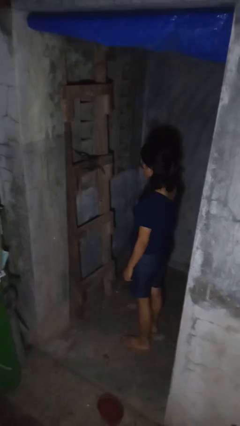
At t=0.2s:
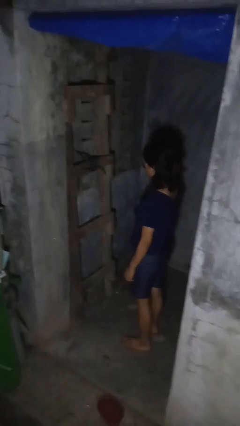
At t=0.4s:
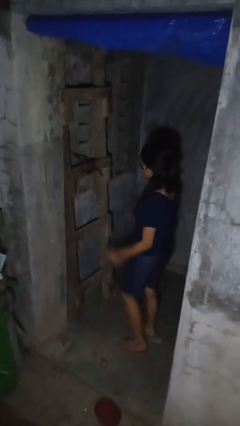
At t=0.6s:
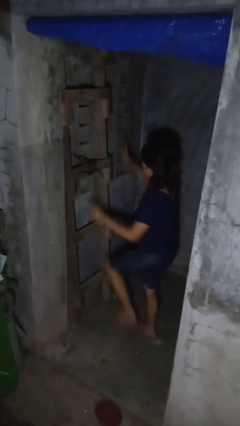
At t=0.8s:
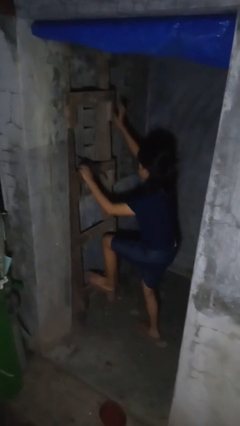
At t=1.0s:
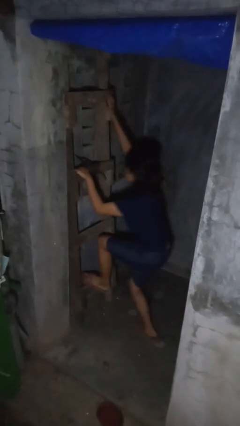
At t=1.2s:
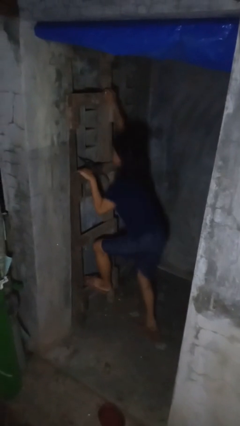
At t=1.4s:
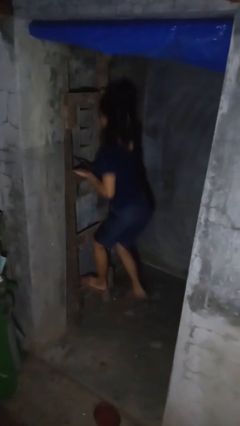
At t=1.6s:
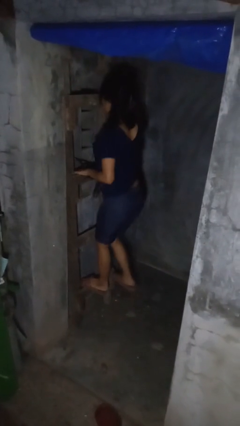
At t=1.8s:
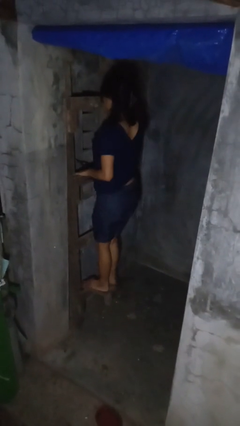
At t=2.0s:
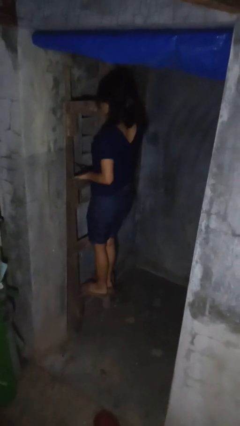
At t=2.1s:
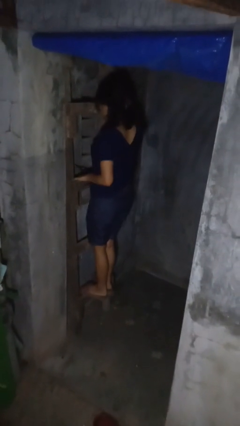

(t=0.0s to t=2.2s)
person climbs up ladder

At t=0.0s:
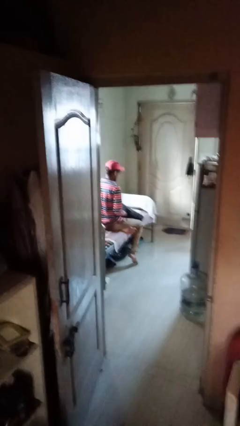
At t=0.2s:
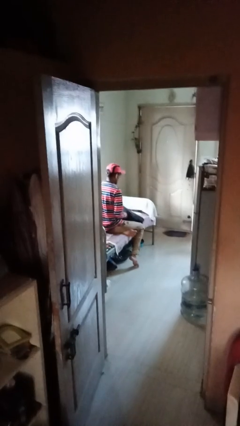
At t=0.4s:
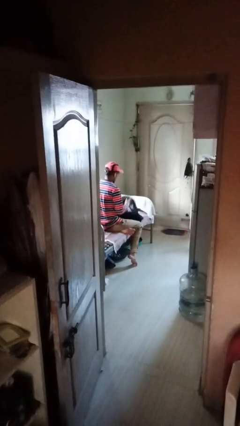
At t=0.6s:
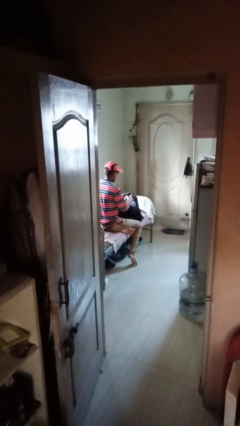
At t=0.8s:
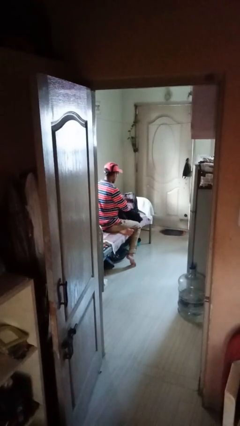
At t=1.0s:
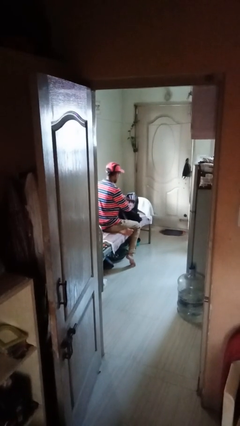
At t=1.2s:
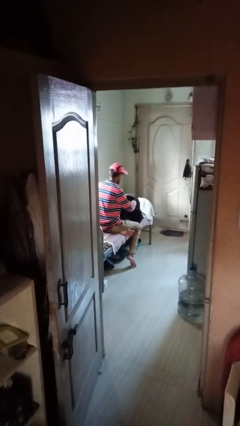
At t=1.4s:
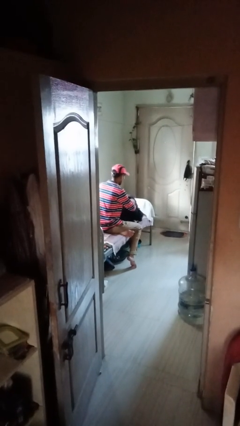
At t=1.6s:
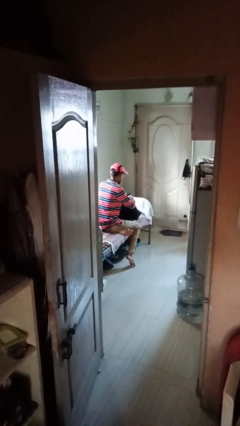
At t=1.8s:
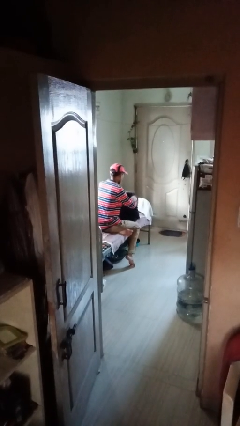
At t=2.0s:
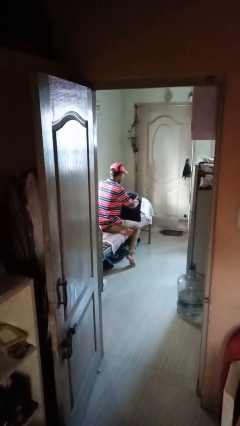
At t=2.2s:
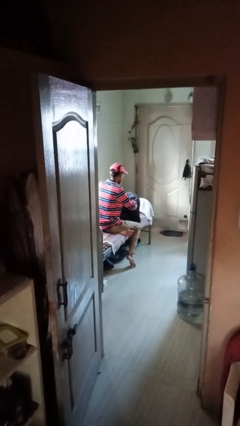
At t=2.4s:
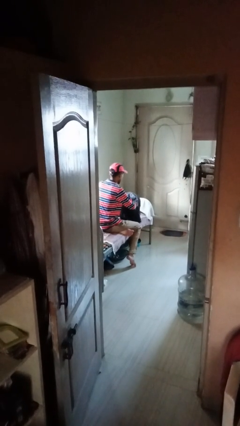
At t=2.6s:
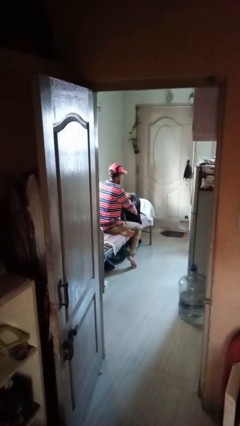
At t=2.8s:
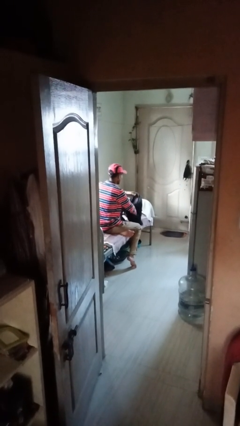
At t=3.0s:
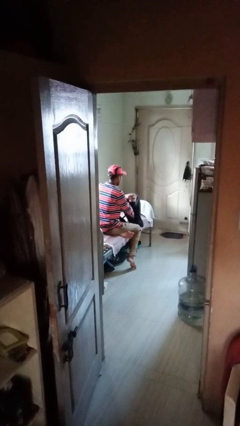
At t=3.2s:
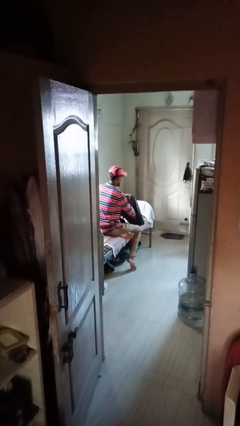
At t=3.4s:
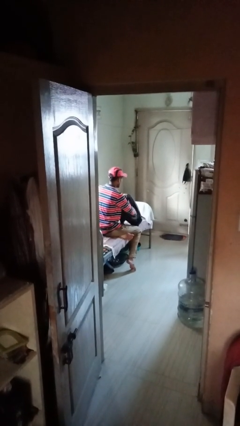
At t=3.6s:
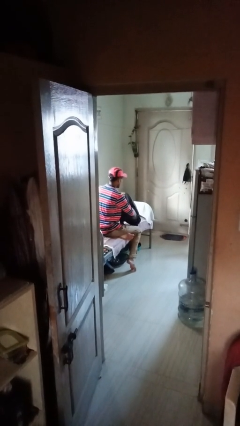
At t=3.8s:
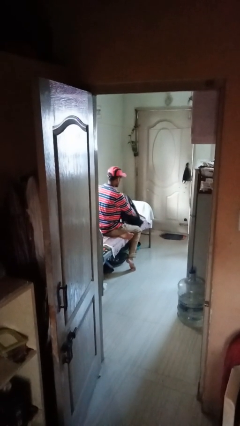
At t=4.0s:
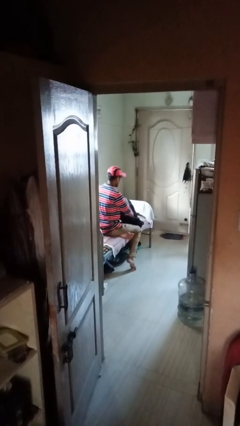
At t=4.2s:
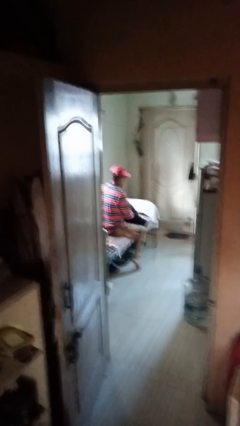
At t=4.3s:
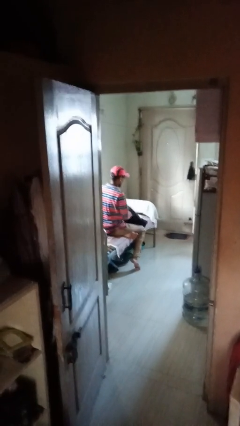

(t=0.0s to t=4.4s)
person searches in backpack

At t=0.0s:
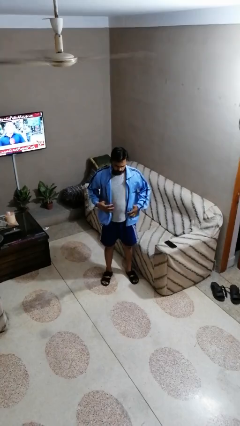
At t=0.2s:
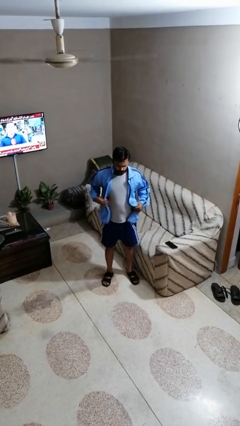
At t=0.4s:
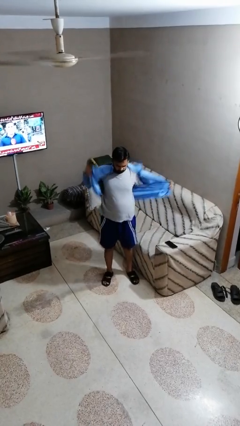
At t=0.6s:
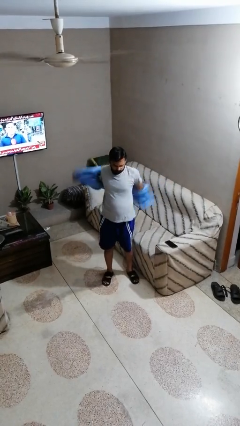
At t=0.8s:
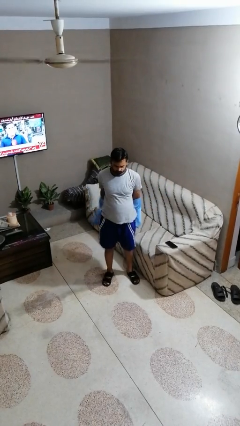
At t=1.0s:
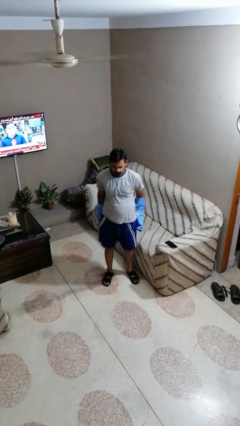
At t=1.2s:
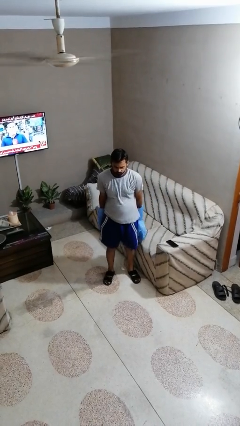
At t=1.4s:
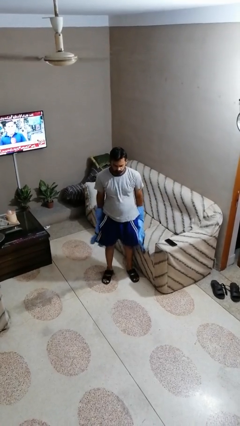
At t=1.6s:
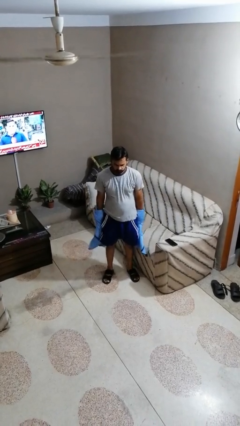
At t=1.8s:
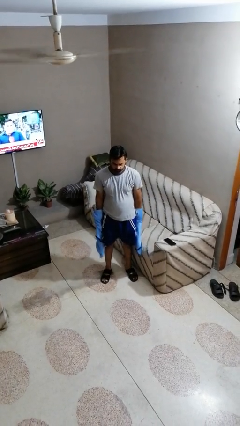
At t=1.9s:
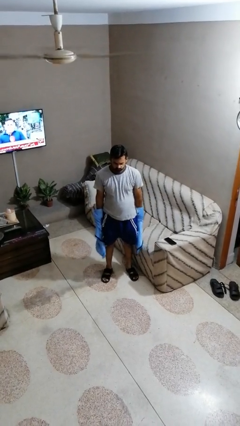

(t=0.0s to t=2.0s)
person takes off jacket

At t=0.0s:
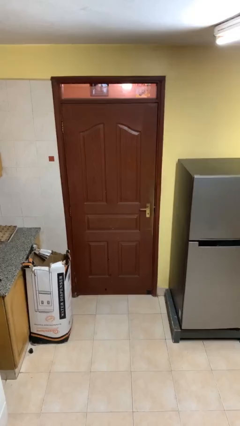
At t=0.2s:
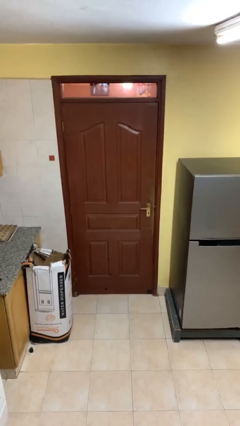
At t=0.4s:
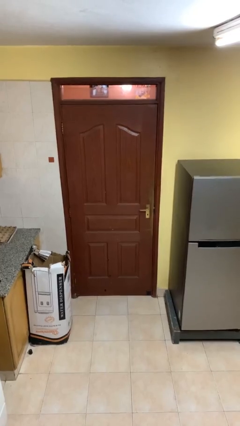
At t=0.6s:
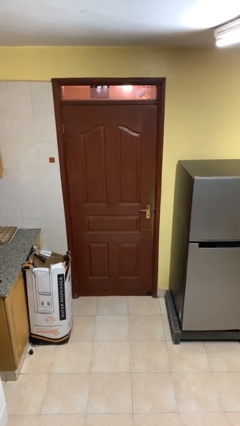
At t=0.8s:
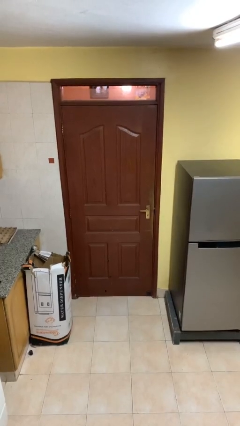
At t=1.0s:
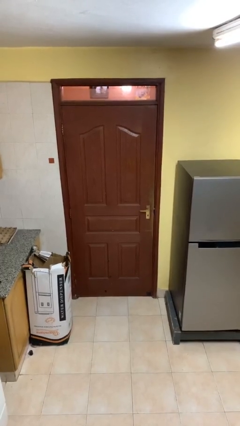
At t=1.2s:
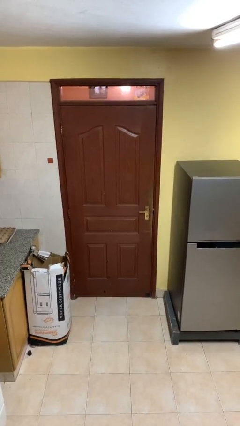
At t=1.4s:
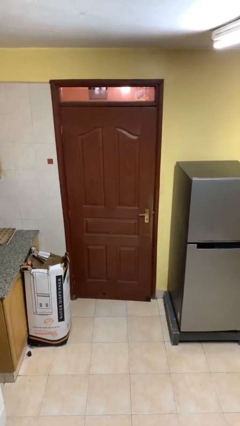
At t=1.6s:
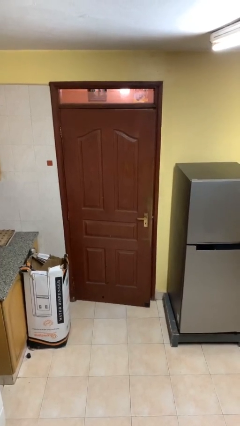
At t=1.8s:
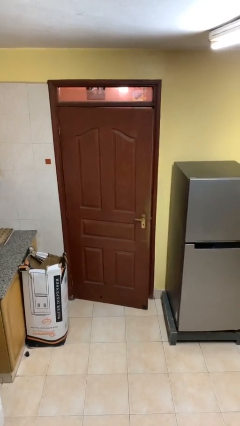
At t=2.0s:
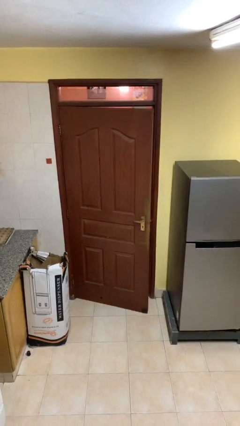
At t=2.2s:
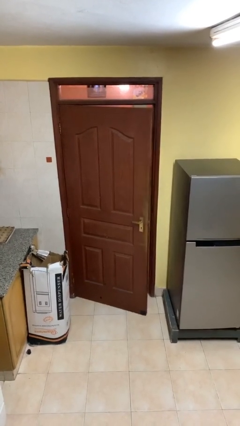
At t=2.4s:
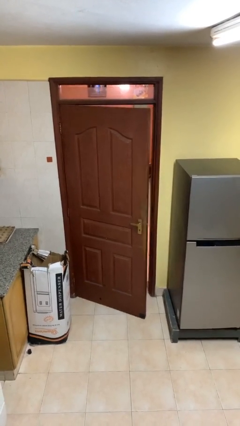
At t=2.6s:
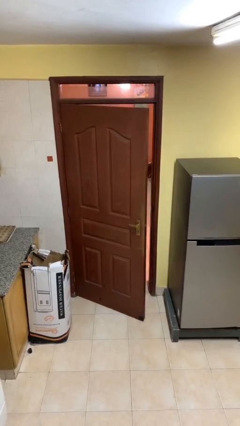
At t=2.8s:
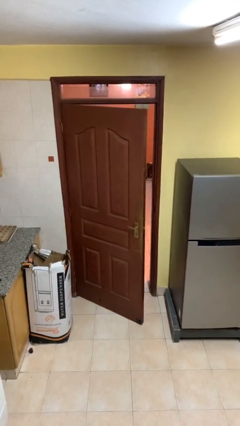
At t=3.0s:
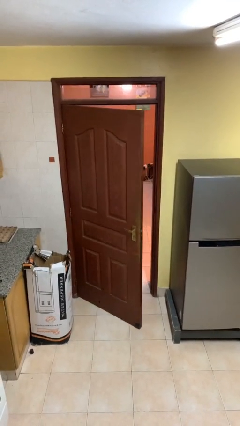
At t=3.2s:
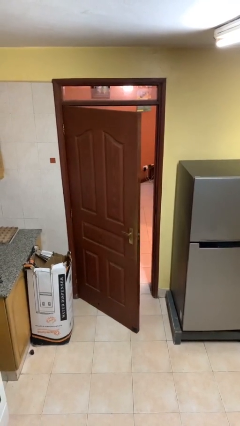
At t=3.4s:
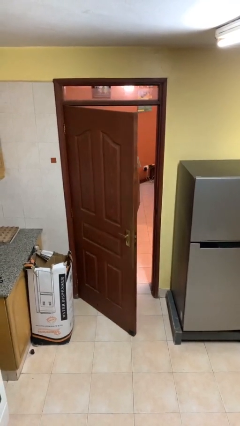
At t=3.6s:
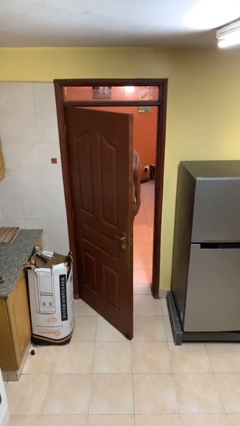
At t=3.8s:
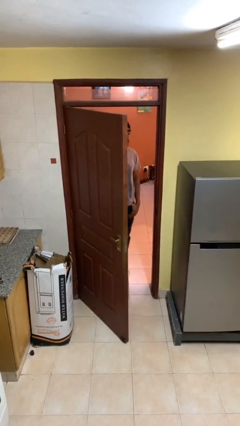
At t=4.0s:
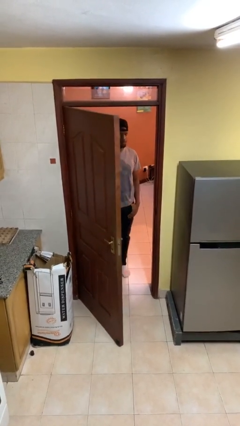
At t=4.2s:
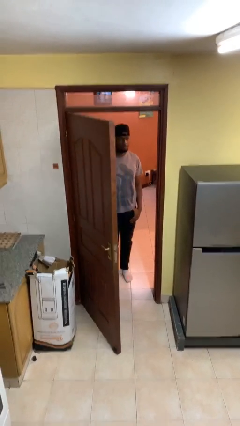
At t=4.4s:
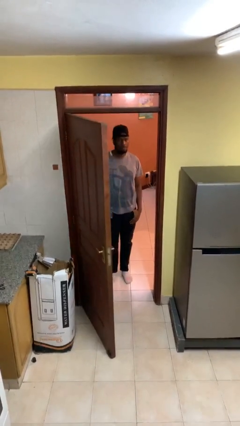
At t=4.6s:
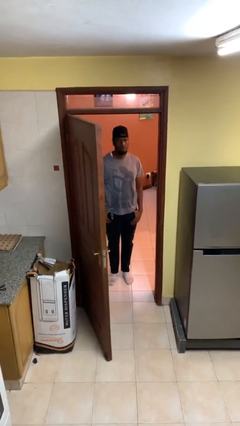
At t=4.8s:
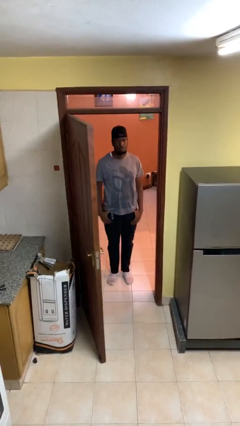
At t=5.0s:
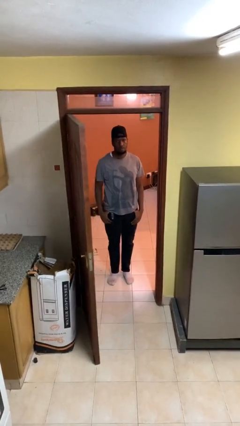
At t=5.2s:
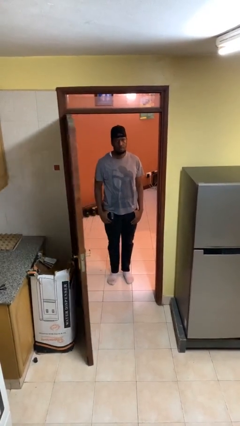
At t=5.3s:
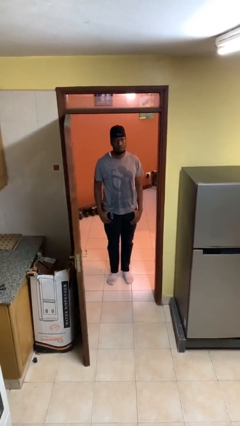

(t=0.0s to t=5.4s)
person opens facility door

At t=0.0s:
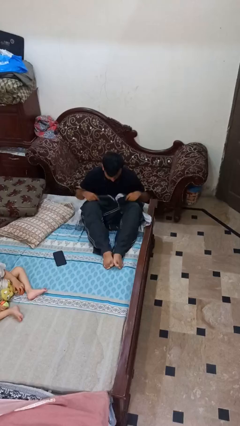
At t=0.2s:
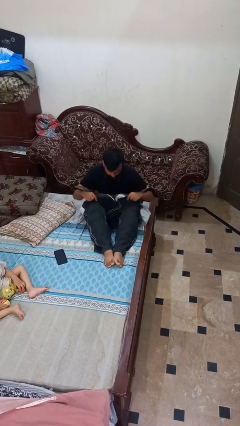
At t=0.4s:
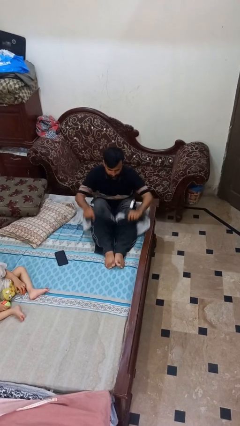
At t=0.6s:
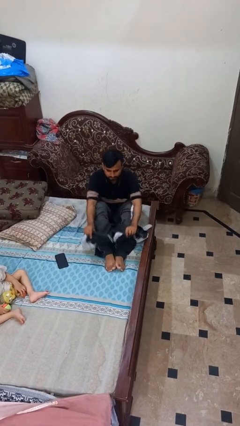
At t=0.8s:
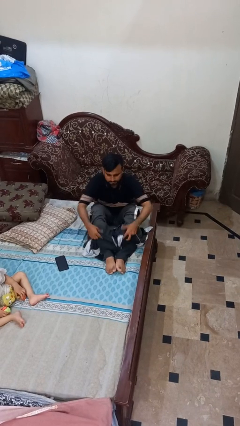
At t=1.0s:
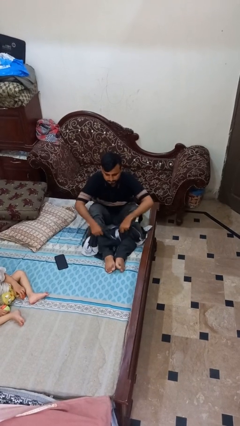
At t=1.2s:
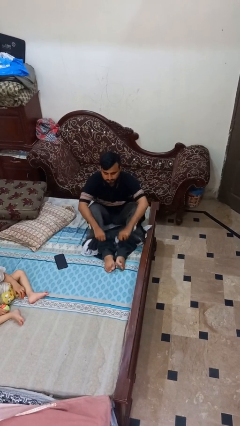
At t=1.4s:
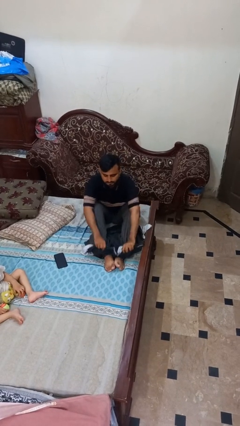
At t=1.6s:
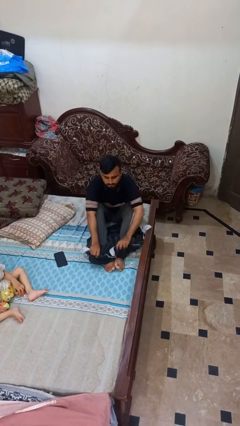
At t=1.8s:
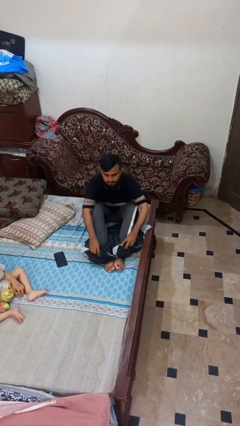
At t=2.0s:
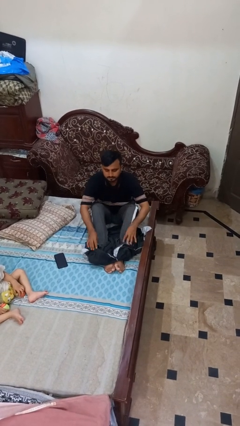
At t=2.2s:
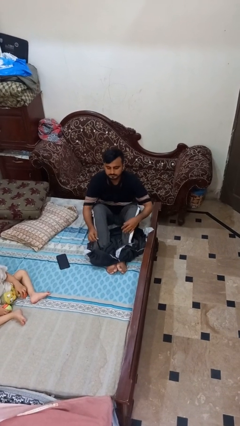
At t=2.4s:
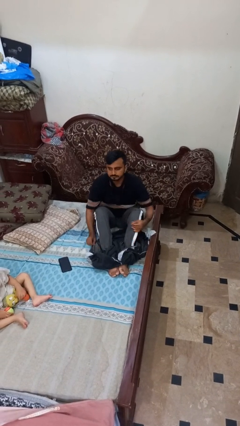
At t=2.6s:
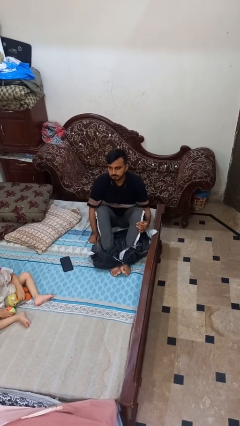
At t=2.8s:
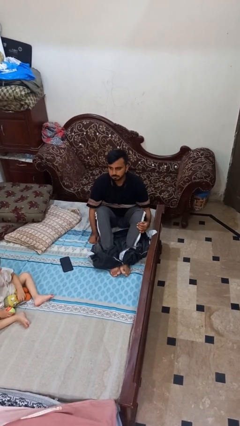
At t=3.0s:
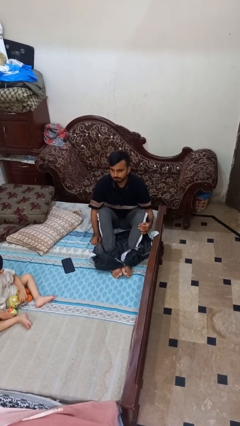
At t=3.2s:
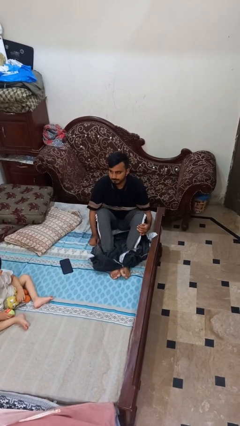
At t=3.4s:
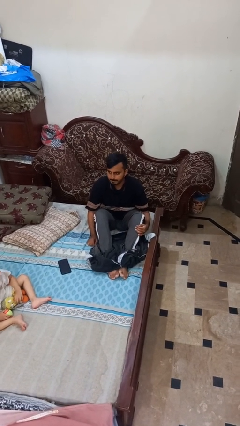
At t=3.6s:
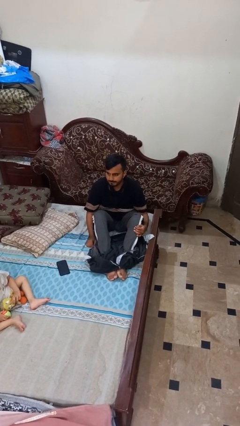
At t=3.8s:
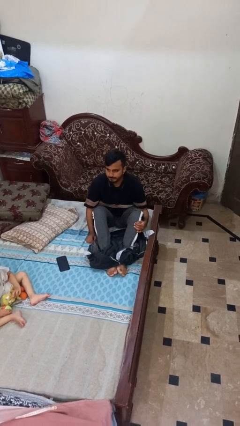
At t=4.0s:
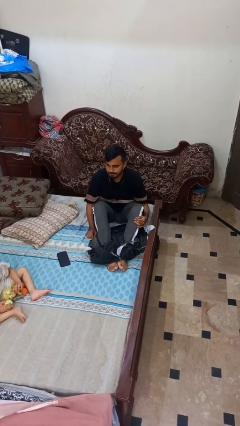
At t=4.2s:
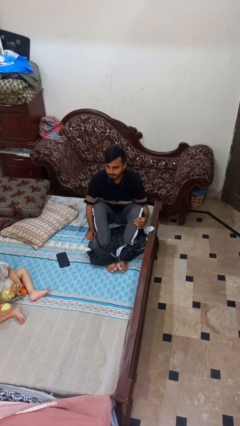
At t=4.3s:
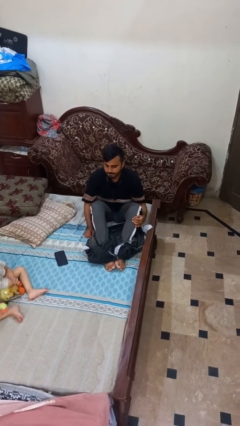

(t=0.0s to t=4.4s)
person takes off pants
